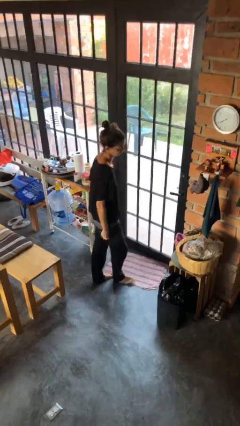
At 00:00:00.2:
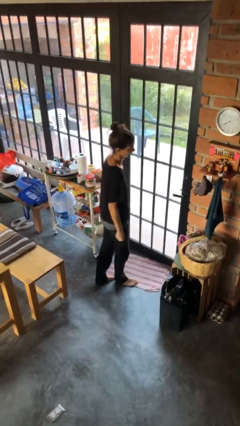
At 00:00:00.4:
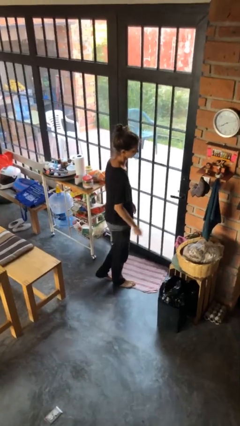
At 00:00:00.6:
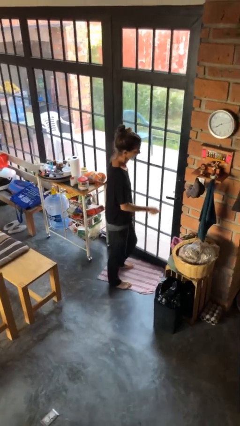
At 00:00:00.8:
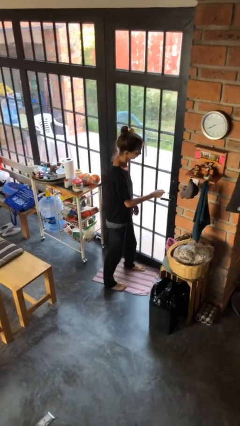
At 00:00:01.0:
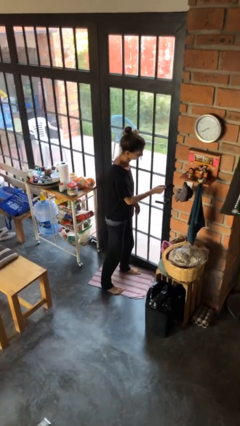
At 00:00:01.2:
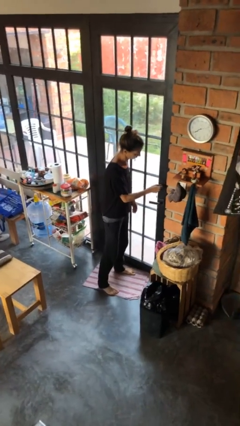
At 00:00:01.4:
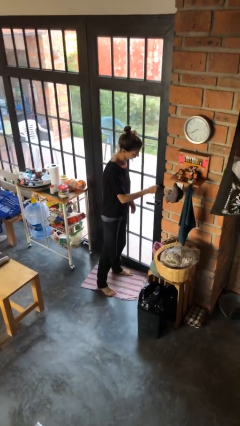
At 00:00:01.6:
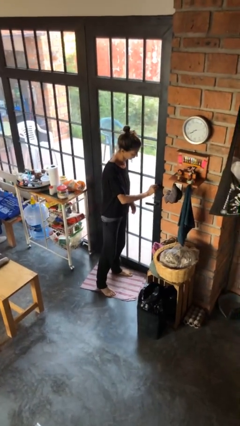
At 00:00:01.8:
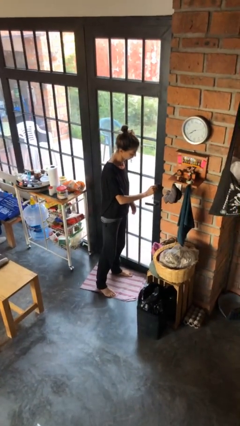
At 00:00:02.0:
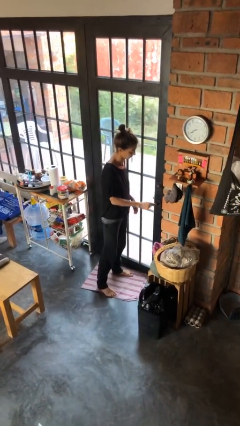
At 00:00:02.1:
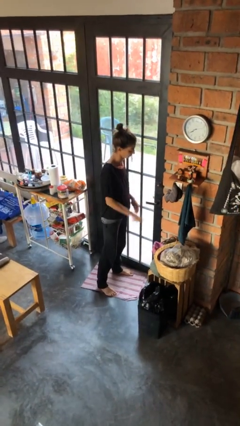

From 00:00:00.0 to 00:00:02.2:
person unlocks door with keys

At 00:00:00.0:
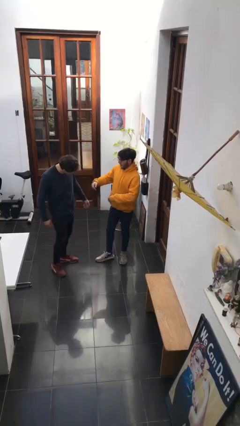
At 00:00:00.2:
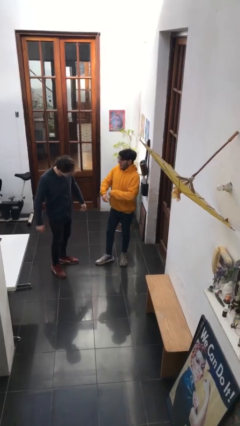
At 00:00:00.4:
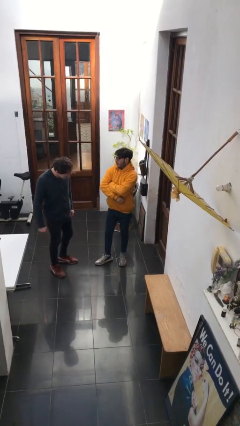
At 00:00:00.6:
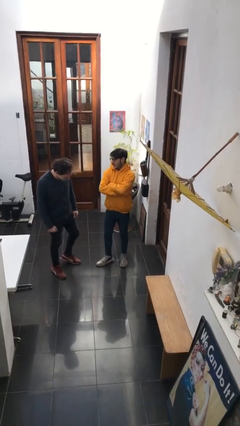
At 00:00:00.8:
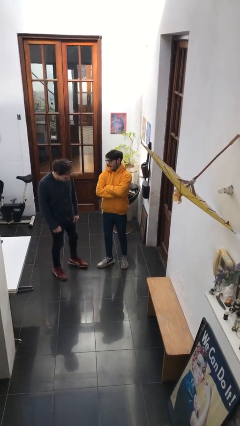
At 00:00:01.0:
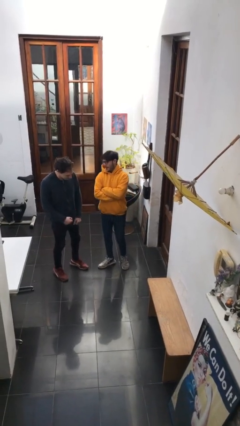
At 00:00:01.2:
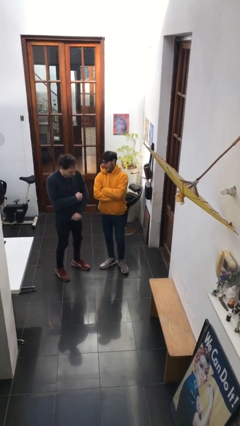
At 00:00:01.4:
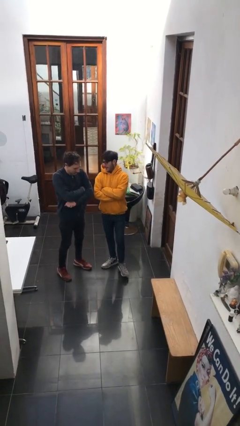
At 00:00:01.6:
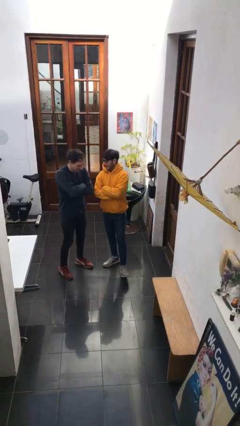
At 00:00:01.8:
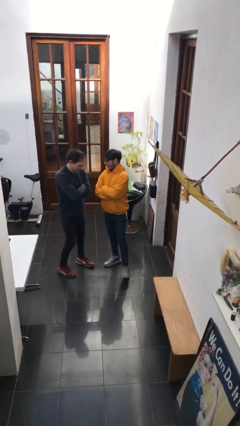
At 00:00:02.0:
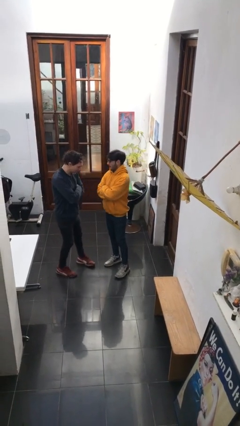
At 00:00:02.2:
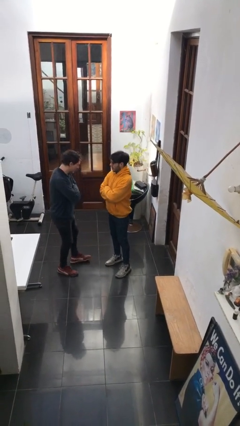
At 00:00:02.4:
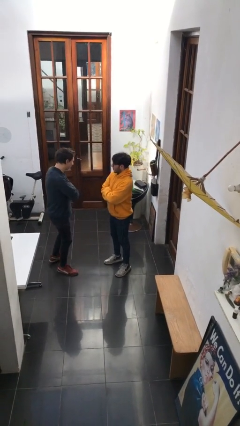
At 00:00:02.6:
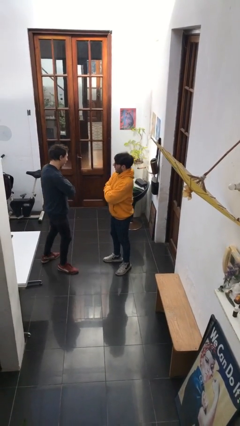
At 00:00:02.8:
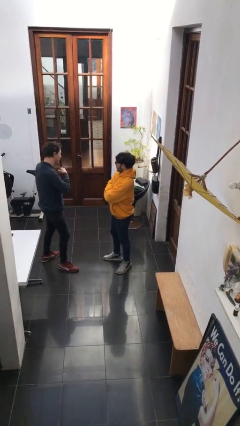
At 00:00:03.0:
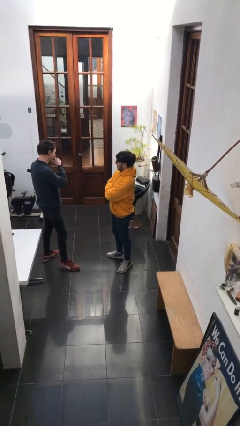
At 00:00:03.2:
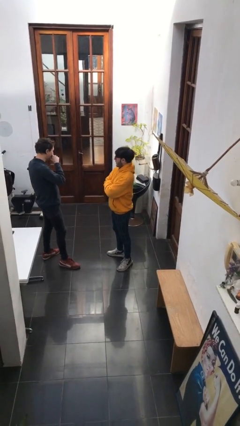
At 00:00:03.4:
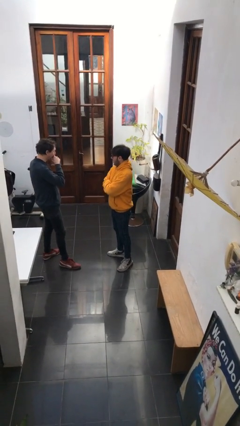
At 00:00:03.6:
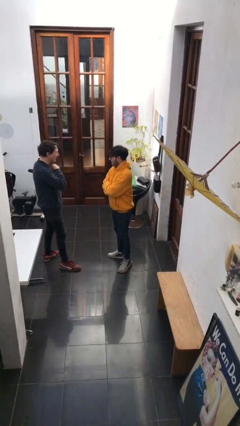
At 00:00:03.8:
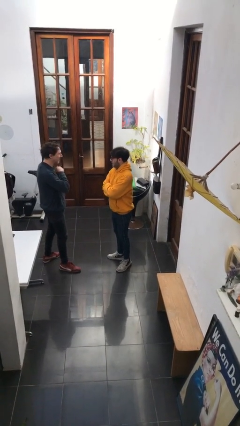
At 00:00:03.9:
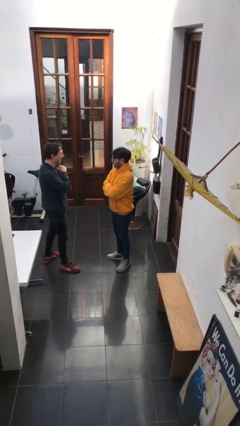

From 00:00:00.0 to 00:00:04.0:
person talks to person

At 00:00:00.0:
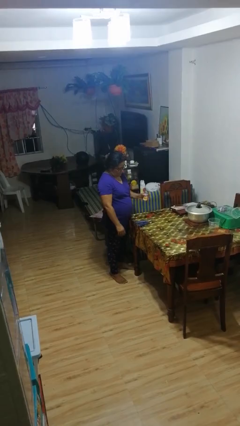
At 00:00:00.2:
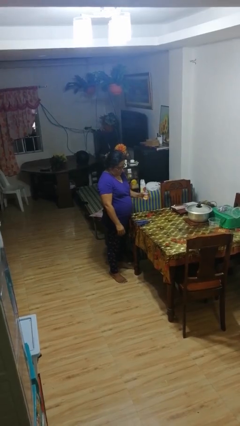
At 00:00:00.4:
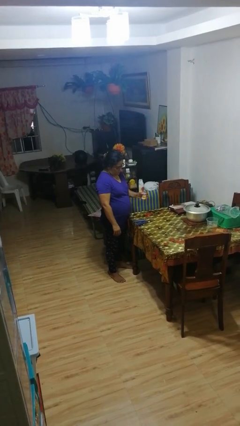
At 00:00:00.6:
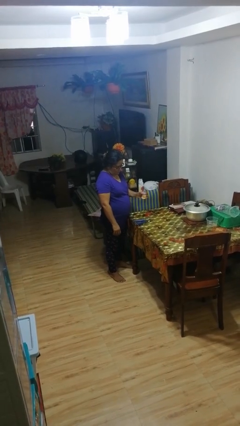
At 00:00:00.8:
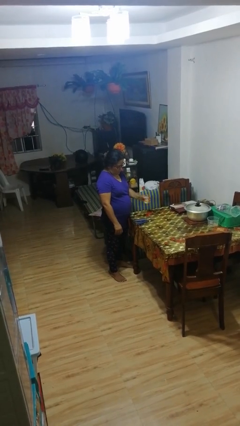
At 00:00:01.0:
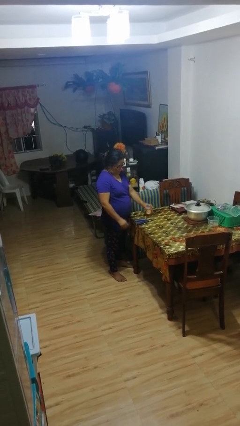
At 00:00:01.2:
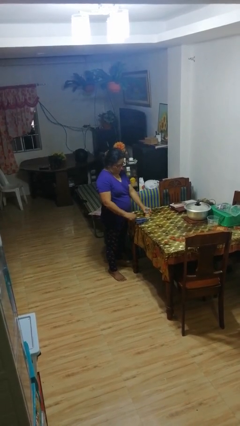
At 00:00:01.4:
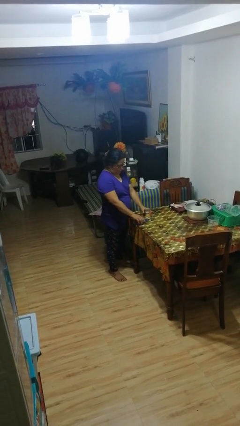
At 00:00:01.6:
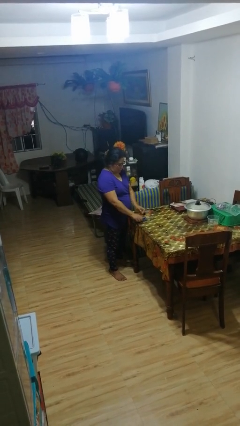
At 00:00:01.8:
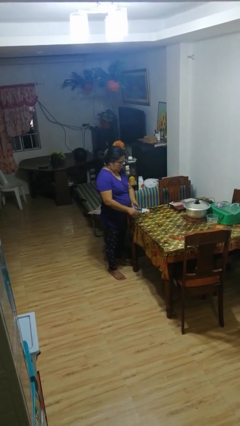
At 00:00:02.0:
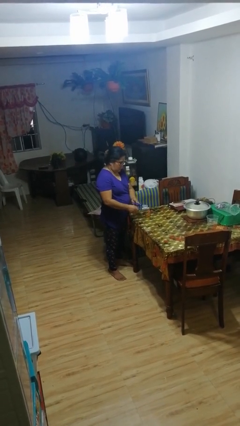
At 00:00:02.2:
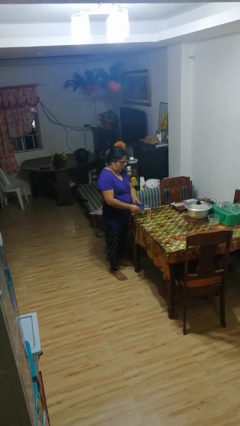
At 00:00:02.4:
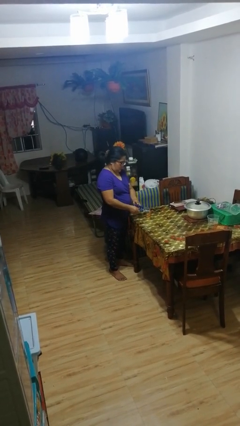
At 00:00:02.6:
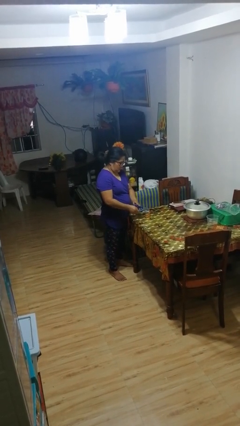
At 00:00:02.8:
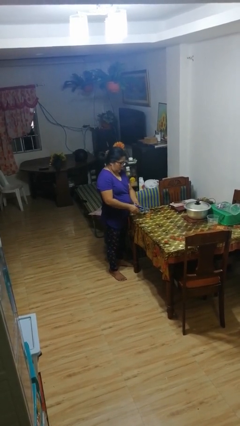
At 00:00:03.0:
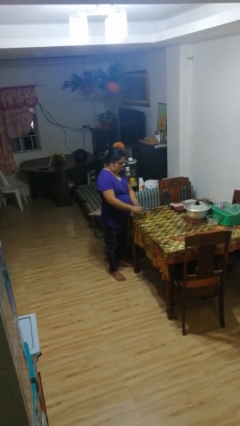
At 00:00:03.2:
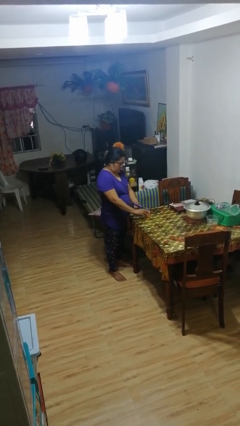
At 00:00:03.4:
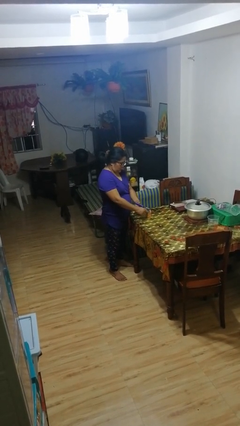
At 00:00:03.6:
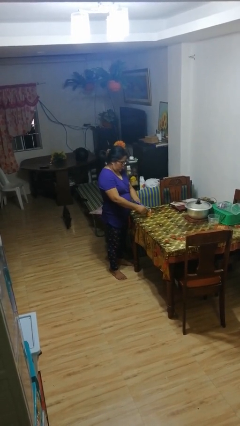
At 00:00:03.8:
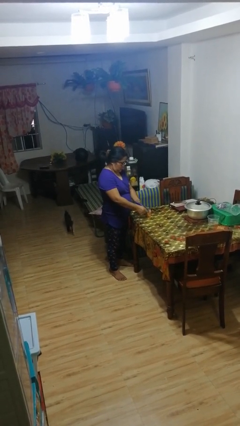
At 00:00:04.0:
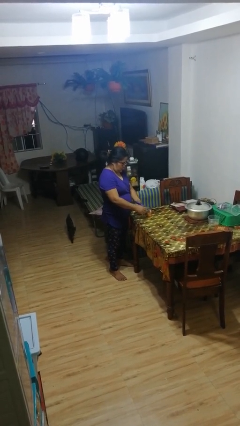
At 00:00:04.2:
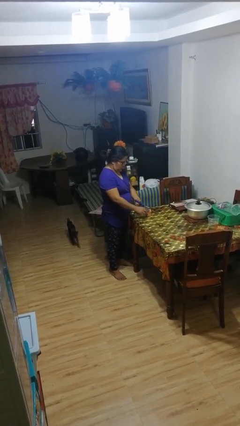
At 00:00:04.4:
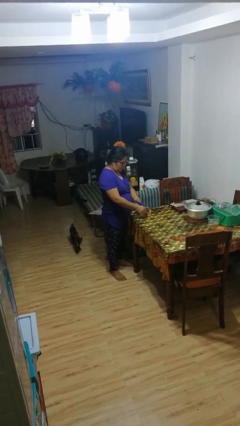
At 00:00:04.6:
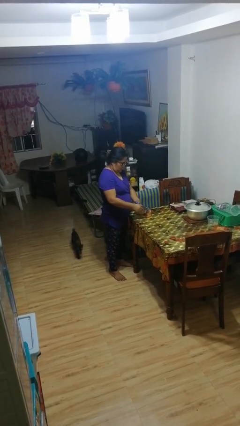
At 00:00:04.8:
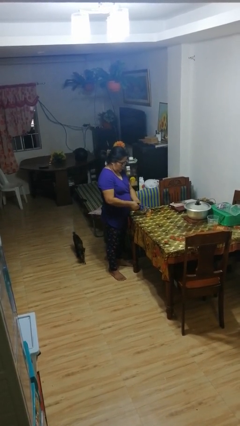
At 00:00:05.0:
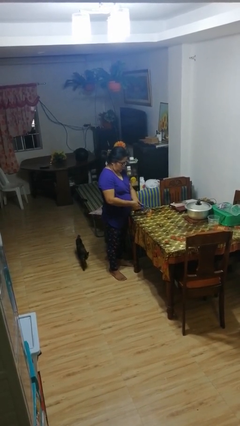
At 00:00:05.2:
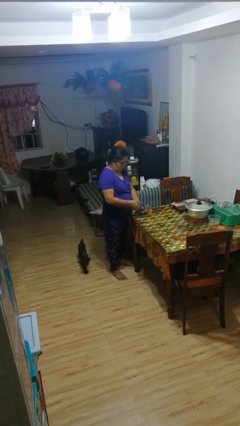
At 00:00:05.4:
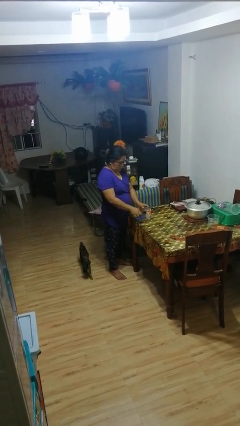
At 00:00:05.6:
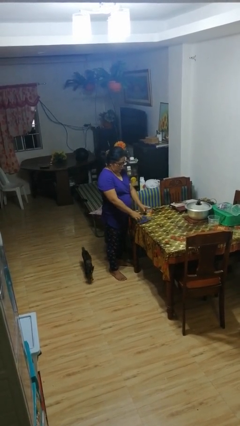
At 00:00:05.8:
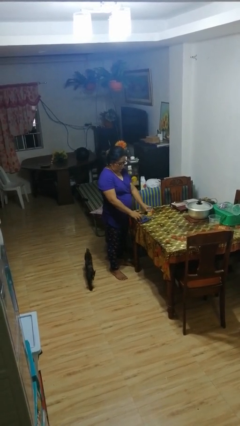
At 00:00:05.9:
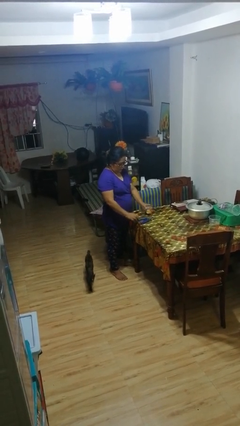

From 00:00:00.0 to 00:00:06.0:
person opens can with can opener

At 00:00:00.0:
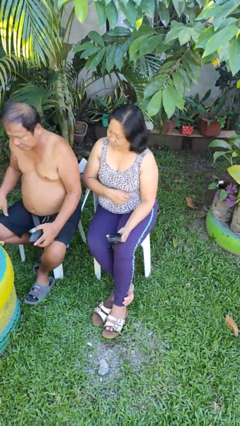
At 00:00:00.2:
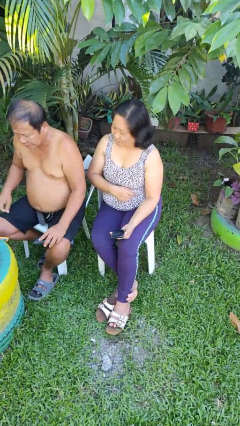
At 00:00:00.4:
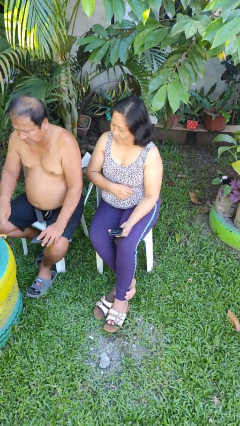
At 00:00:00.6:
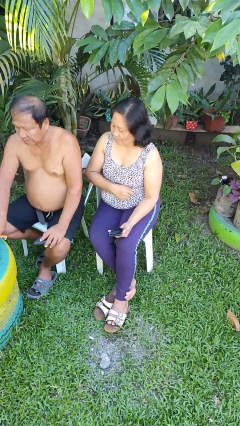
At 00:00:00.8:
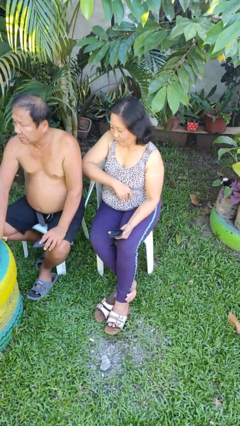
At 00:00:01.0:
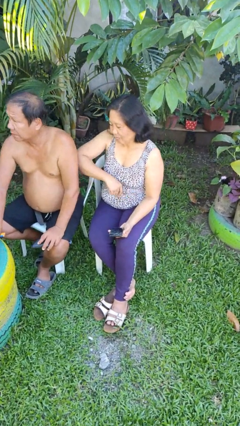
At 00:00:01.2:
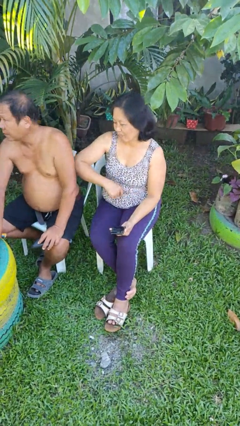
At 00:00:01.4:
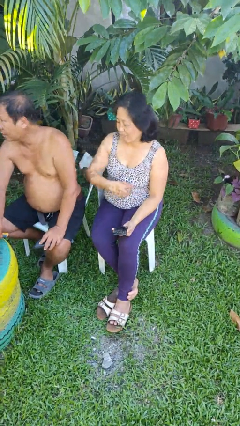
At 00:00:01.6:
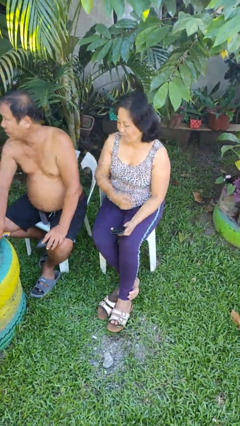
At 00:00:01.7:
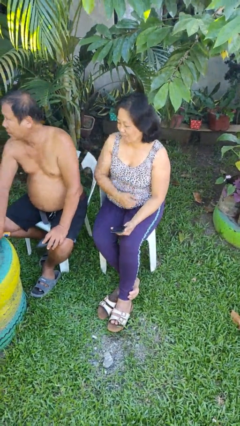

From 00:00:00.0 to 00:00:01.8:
person nudges person with elbow

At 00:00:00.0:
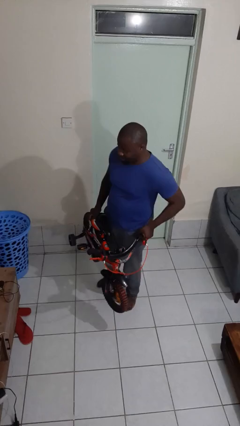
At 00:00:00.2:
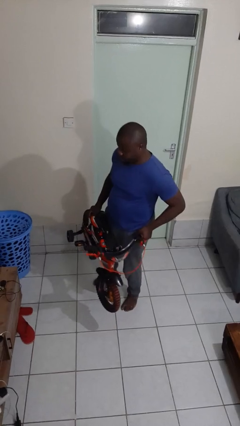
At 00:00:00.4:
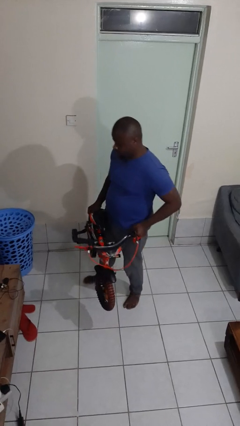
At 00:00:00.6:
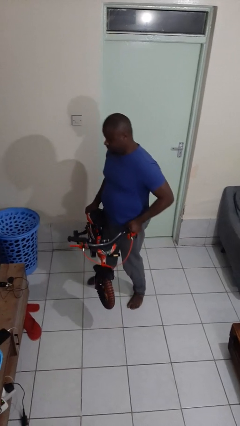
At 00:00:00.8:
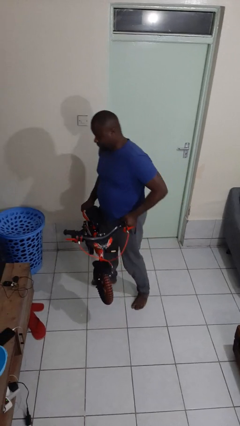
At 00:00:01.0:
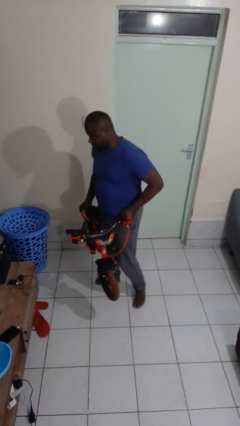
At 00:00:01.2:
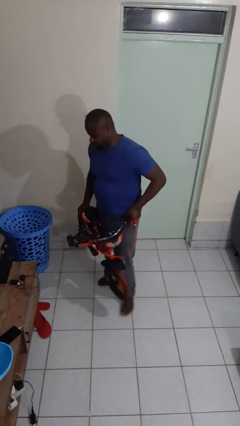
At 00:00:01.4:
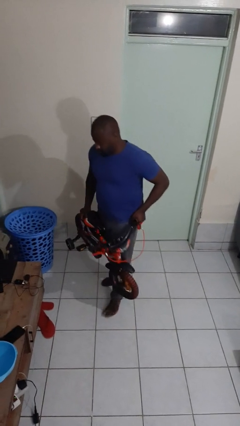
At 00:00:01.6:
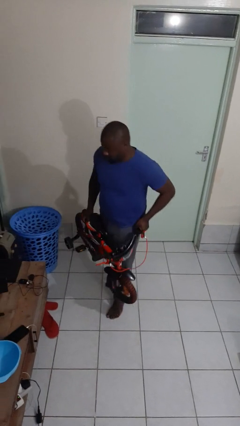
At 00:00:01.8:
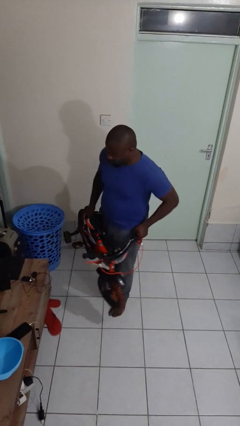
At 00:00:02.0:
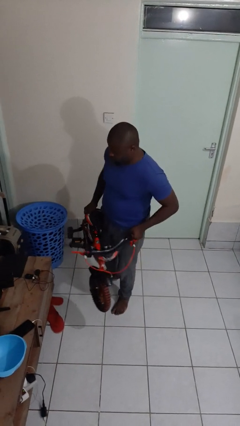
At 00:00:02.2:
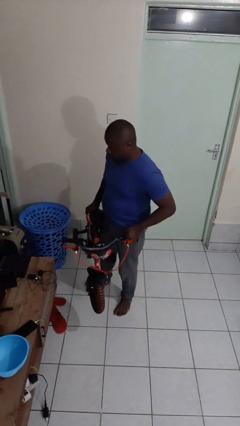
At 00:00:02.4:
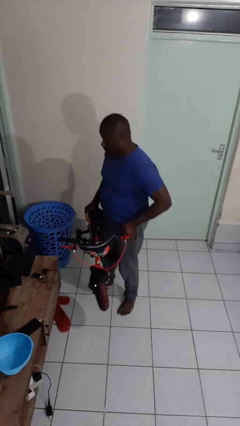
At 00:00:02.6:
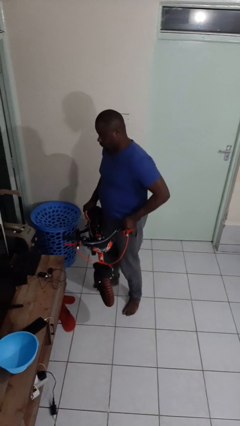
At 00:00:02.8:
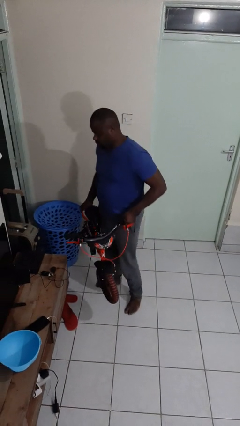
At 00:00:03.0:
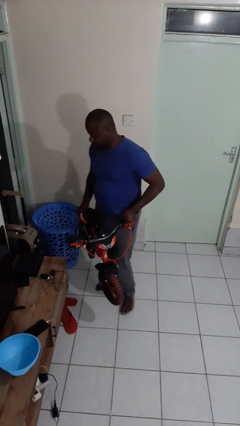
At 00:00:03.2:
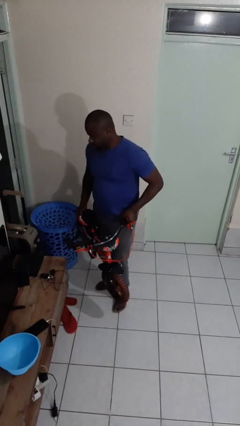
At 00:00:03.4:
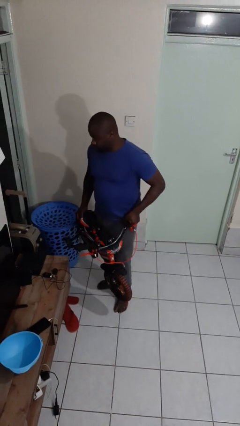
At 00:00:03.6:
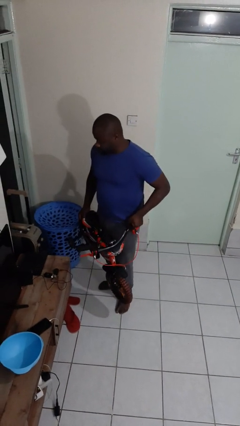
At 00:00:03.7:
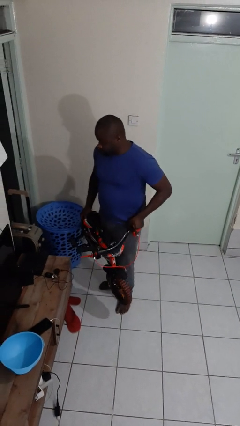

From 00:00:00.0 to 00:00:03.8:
person carries bicycle
